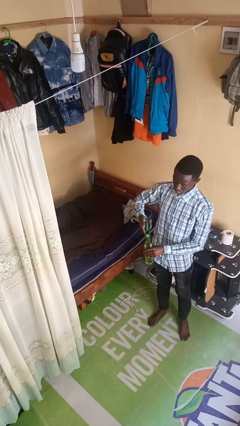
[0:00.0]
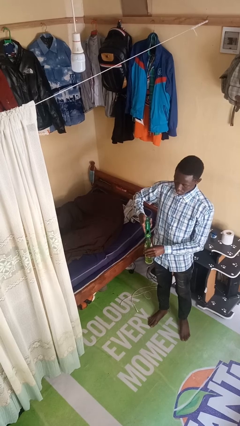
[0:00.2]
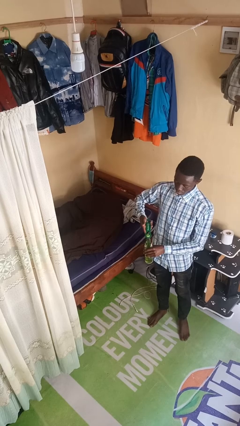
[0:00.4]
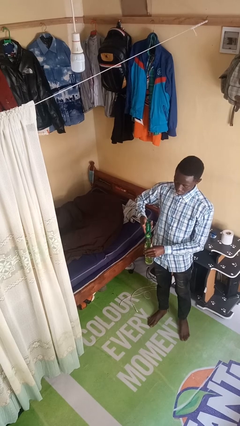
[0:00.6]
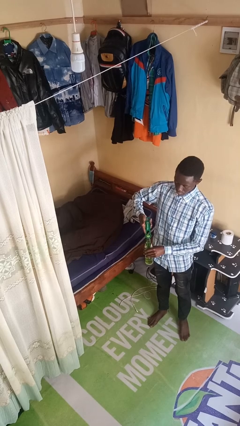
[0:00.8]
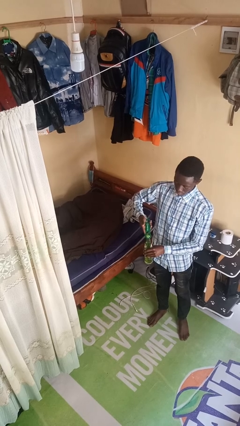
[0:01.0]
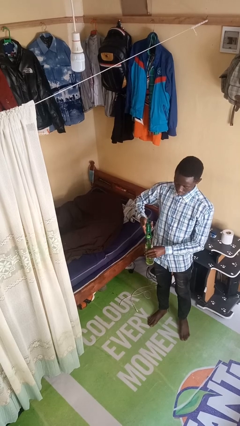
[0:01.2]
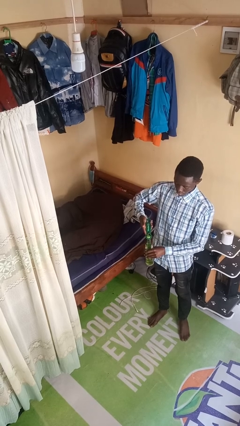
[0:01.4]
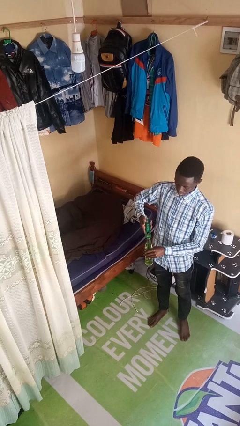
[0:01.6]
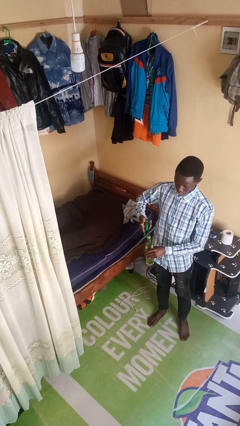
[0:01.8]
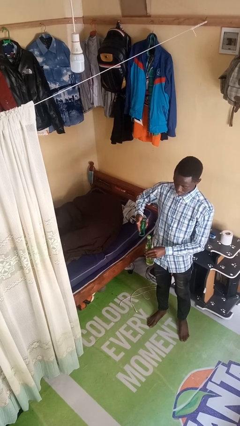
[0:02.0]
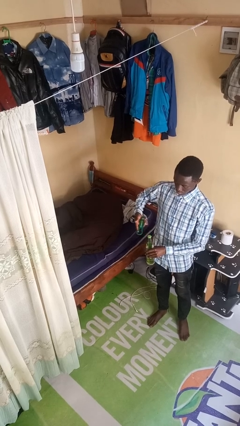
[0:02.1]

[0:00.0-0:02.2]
person opens can with can opener

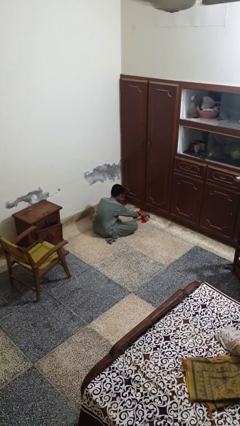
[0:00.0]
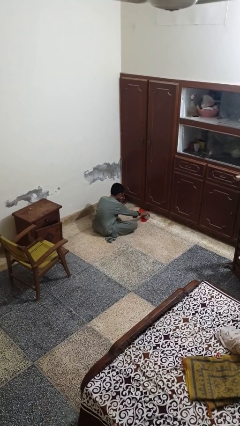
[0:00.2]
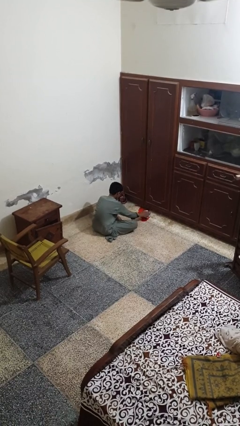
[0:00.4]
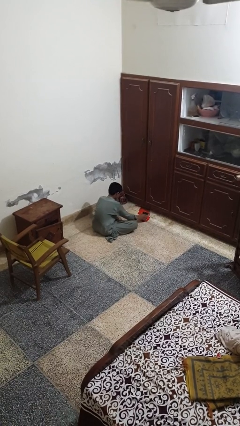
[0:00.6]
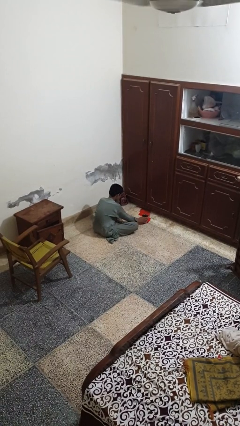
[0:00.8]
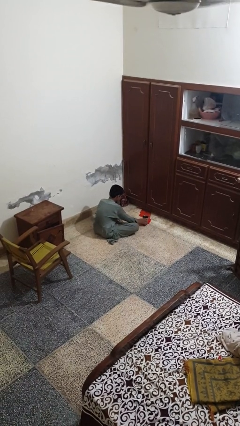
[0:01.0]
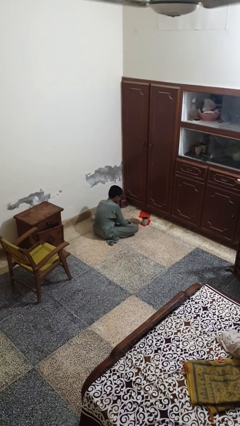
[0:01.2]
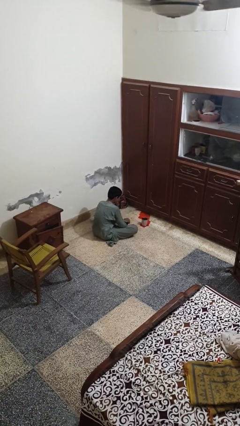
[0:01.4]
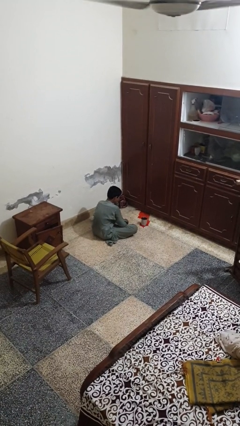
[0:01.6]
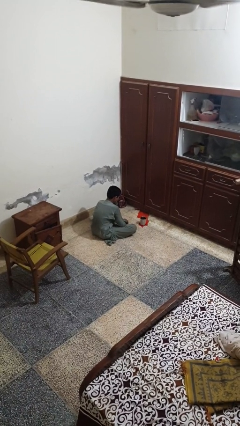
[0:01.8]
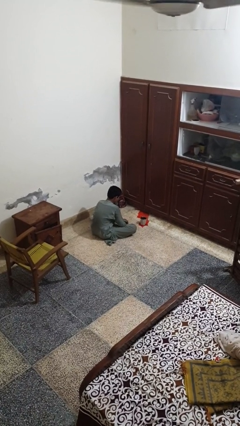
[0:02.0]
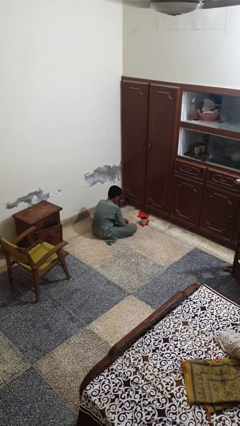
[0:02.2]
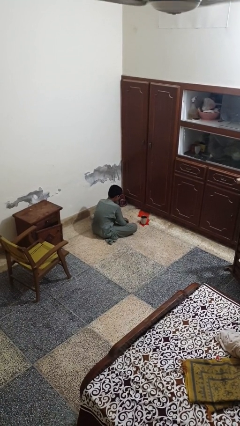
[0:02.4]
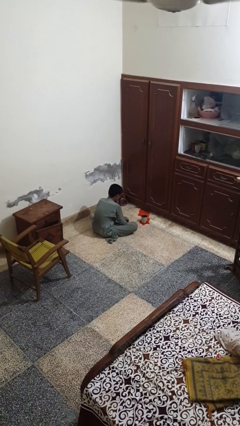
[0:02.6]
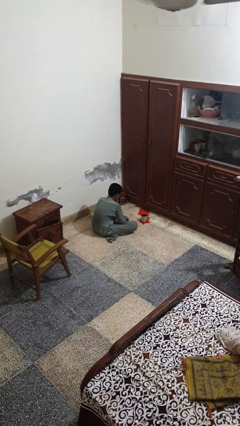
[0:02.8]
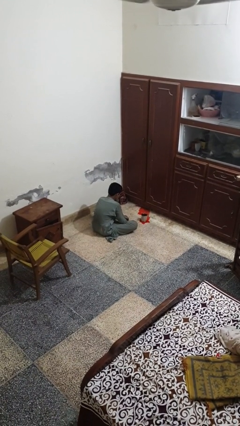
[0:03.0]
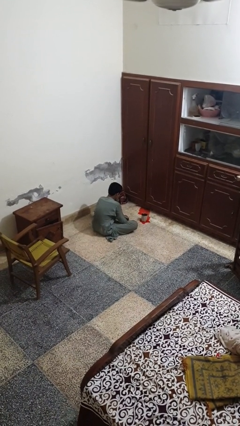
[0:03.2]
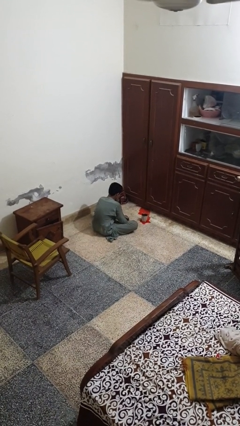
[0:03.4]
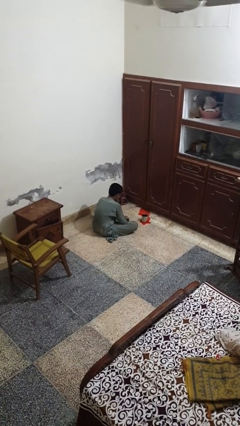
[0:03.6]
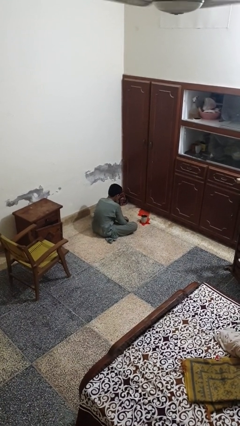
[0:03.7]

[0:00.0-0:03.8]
person sets upright glass

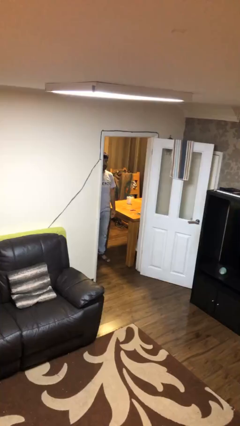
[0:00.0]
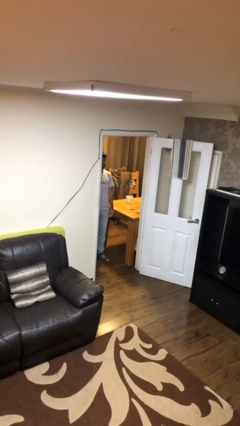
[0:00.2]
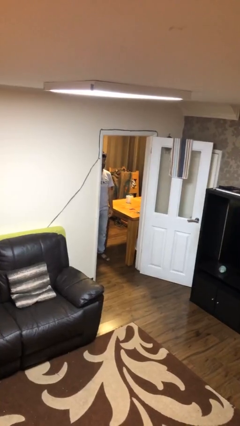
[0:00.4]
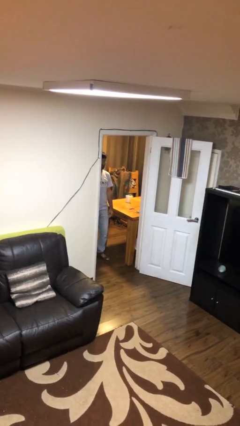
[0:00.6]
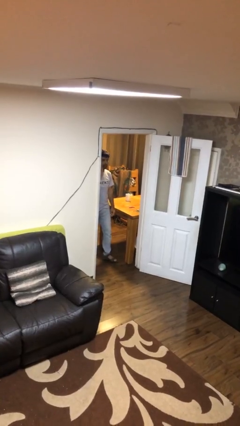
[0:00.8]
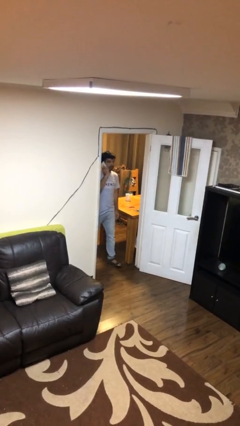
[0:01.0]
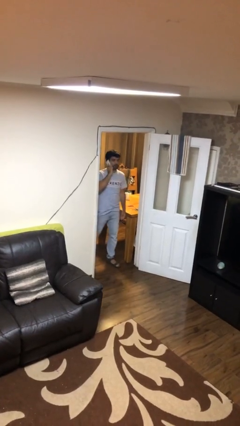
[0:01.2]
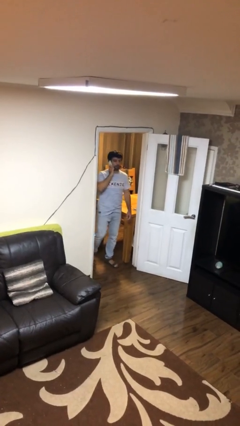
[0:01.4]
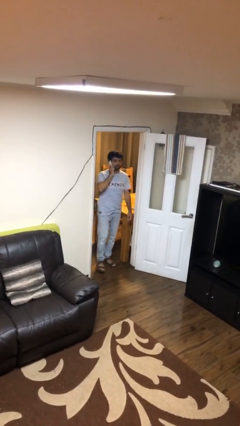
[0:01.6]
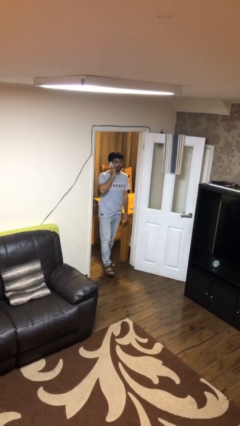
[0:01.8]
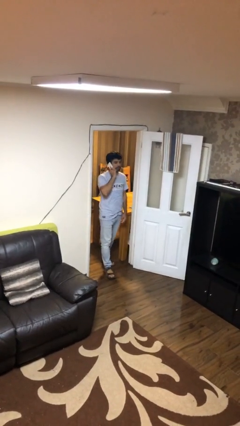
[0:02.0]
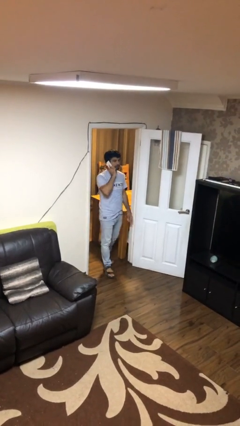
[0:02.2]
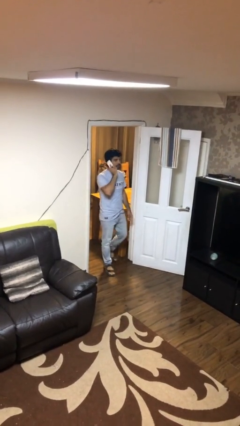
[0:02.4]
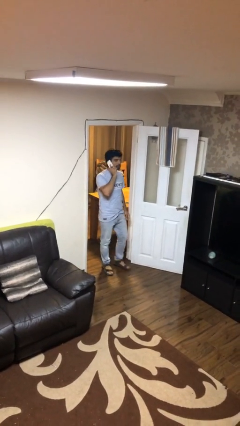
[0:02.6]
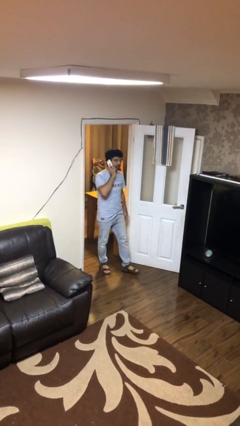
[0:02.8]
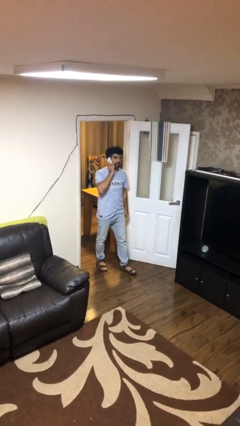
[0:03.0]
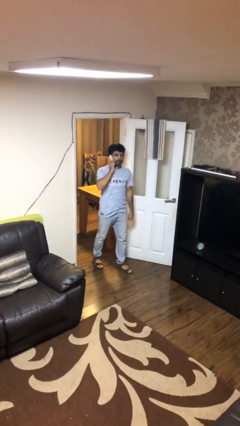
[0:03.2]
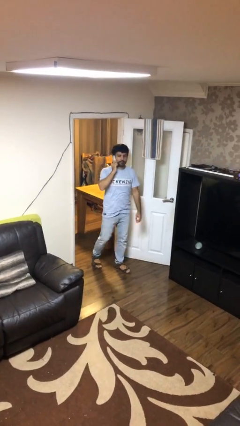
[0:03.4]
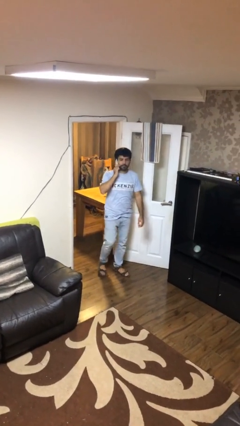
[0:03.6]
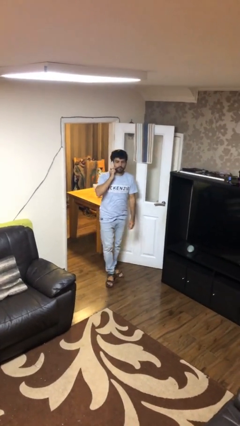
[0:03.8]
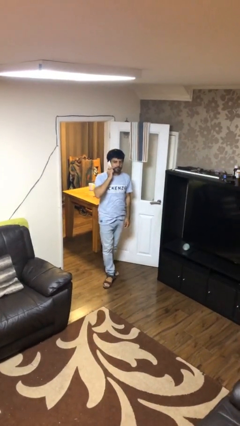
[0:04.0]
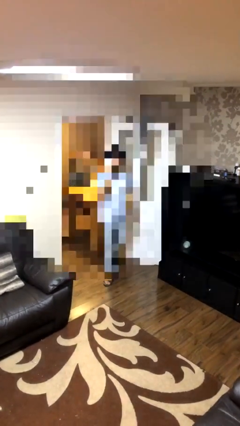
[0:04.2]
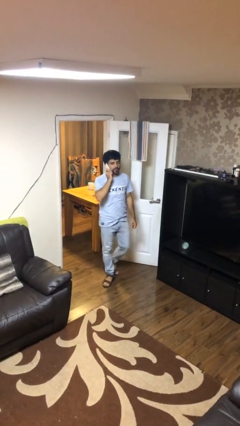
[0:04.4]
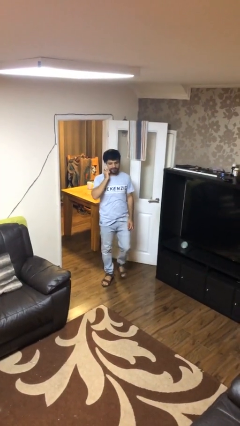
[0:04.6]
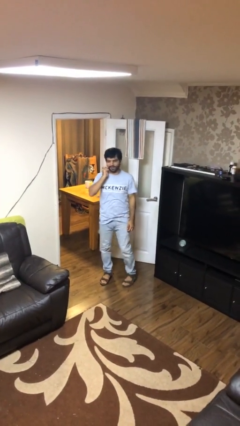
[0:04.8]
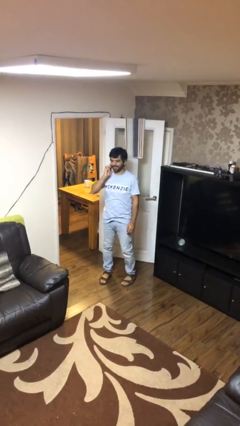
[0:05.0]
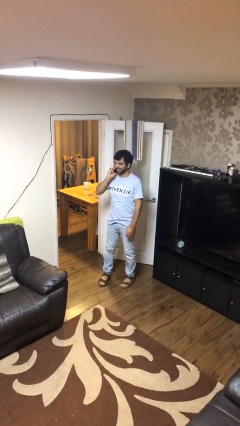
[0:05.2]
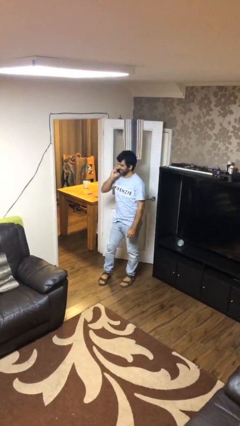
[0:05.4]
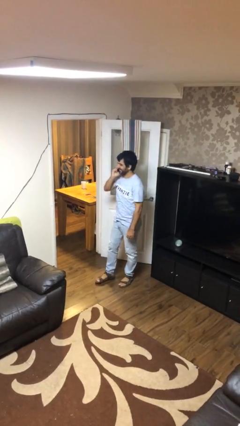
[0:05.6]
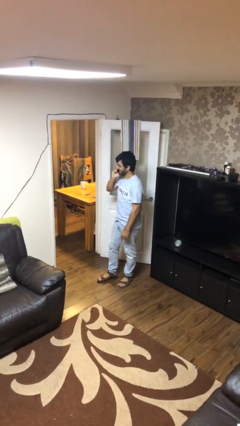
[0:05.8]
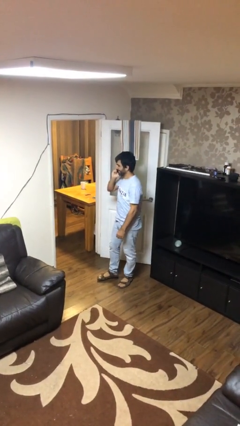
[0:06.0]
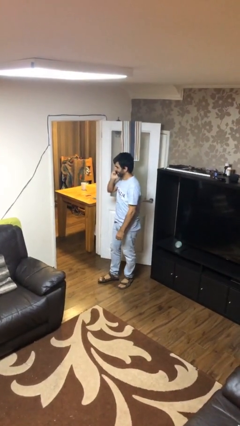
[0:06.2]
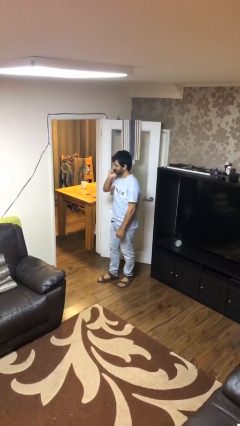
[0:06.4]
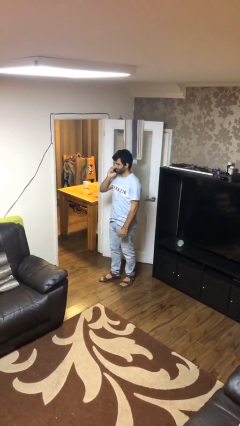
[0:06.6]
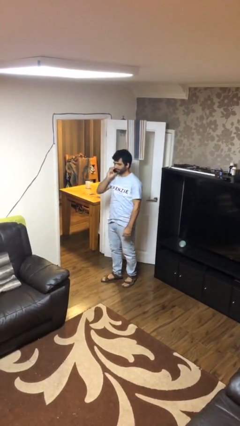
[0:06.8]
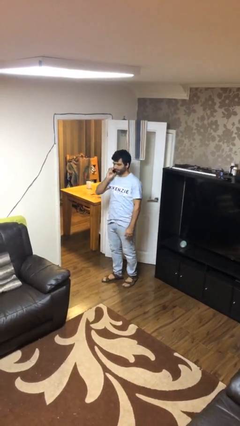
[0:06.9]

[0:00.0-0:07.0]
person enters scene through structure

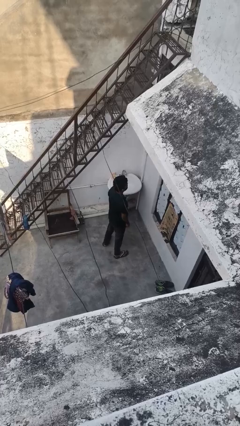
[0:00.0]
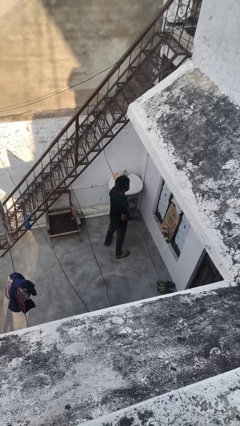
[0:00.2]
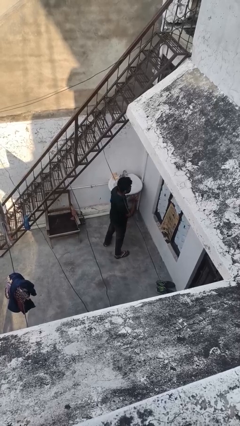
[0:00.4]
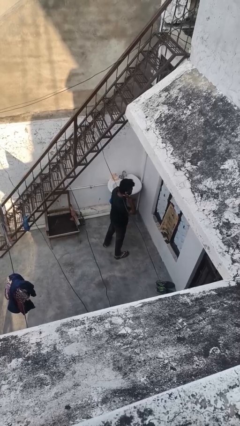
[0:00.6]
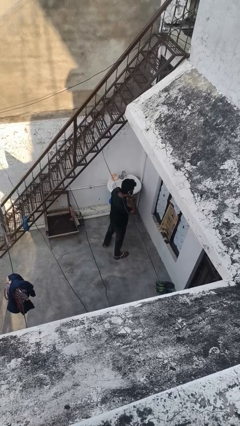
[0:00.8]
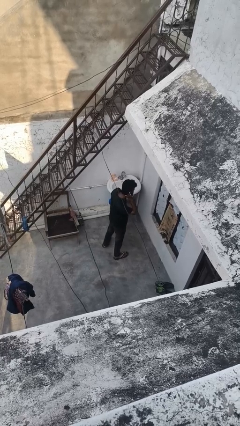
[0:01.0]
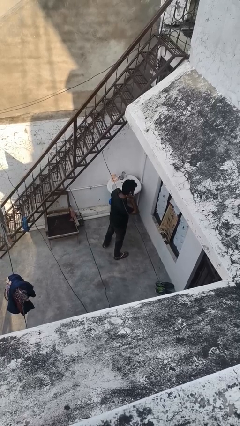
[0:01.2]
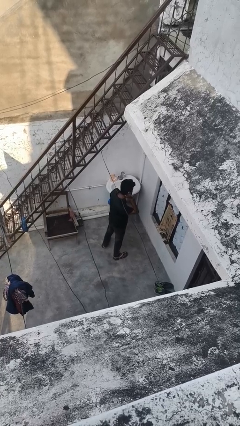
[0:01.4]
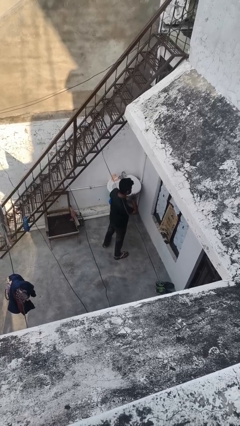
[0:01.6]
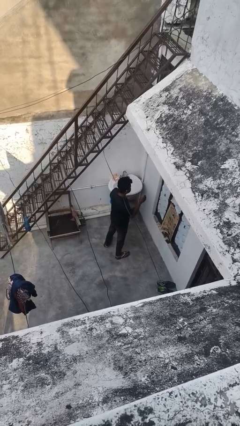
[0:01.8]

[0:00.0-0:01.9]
person gestures listen closely

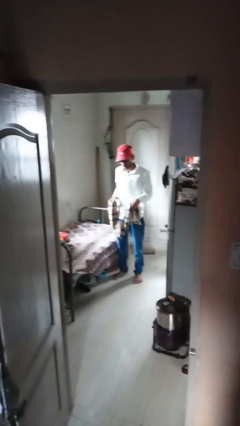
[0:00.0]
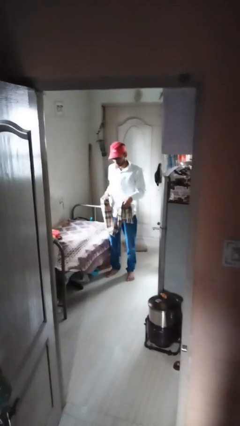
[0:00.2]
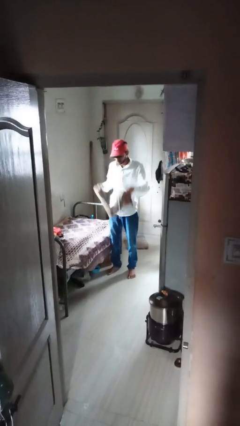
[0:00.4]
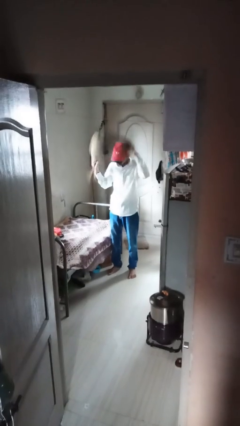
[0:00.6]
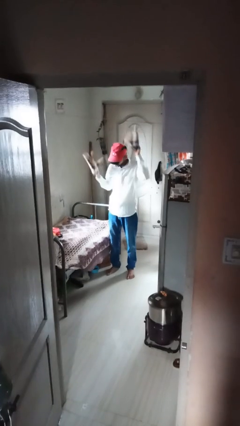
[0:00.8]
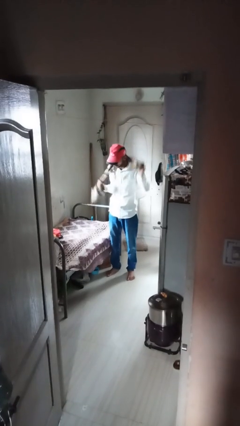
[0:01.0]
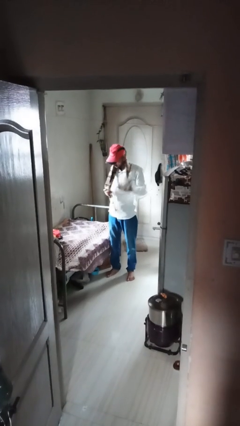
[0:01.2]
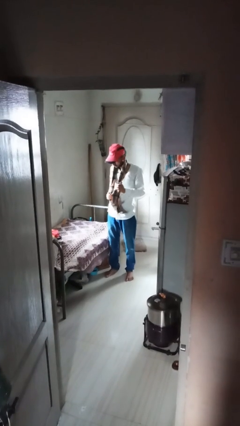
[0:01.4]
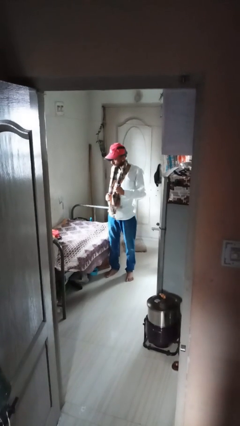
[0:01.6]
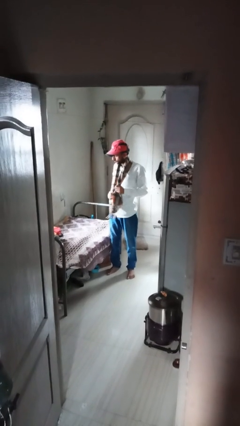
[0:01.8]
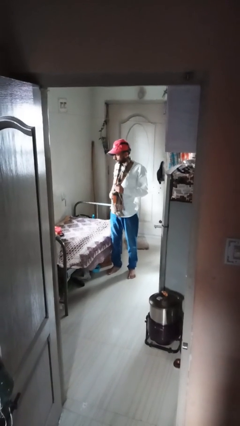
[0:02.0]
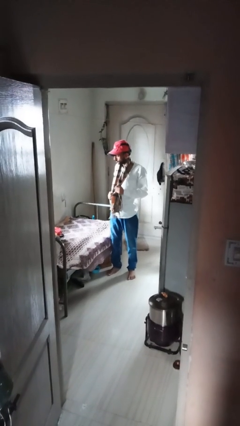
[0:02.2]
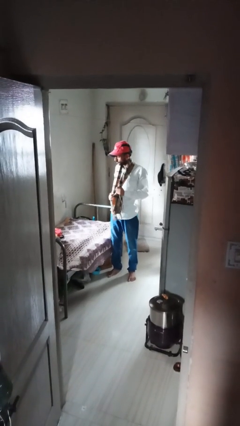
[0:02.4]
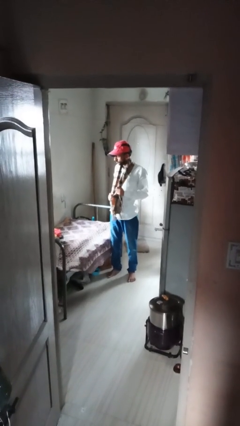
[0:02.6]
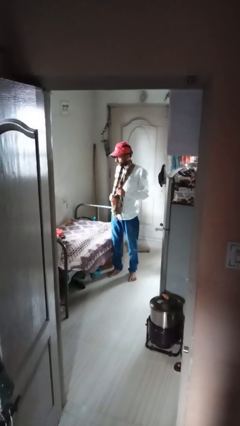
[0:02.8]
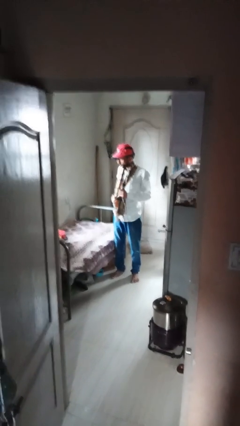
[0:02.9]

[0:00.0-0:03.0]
person puts on scarf
